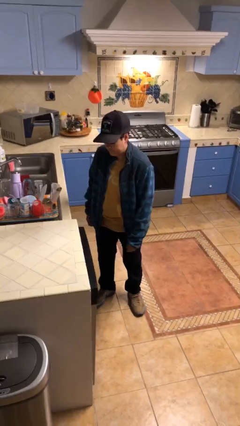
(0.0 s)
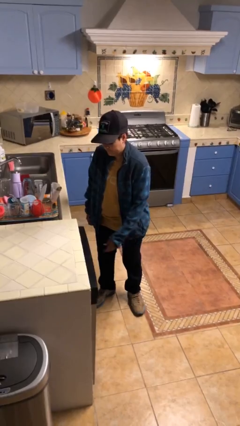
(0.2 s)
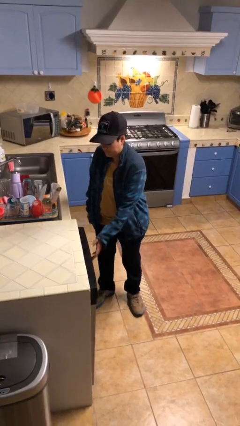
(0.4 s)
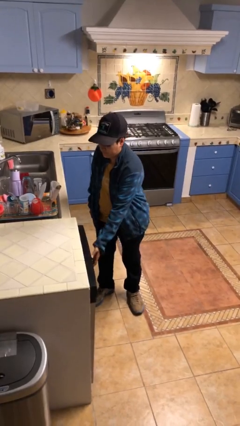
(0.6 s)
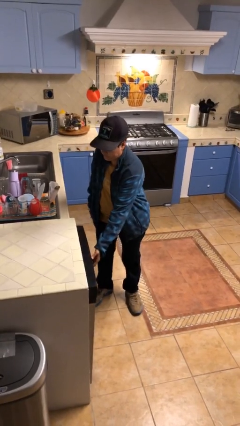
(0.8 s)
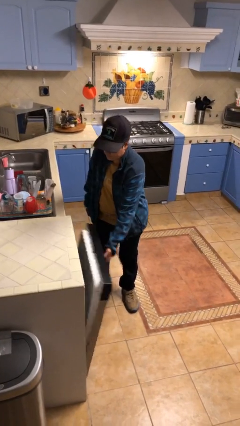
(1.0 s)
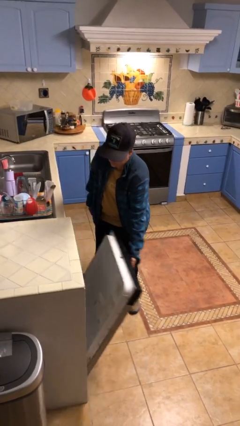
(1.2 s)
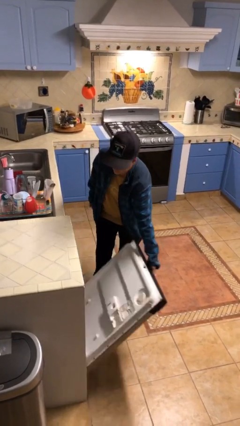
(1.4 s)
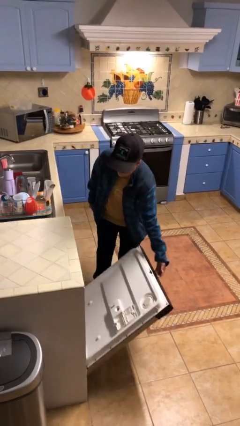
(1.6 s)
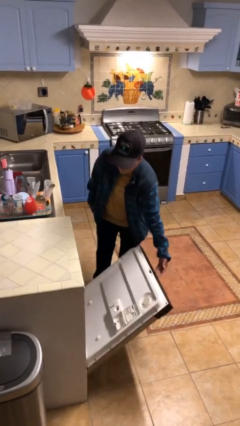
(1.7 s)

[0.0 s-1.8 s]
person opens dishwasher

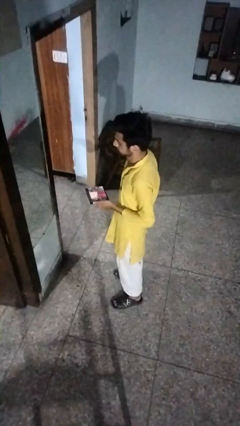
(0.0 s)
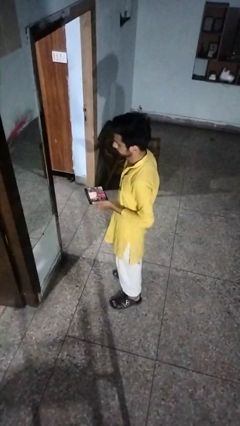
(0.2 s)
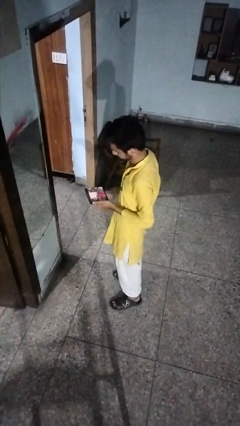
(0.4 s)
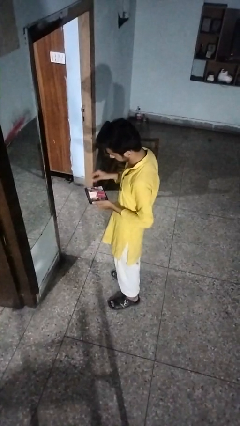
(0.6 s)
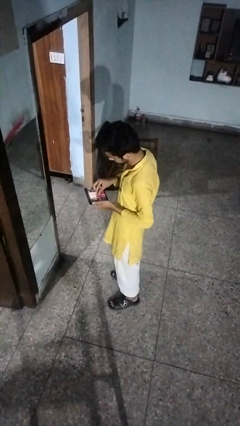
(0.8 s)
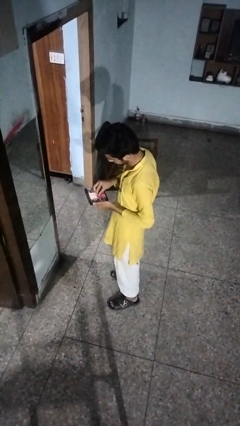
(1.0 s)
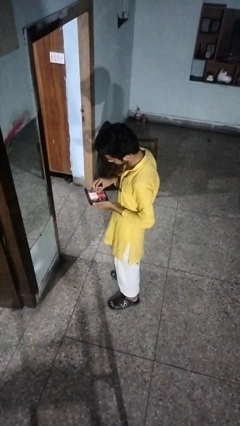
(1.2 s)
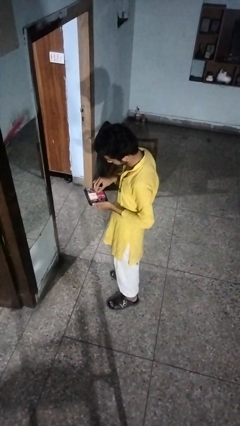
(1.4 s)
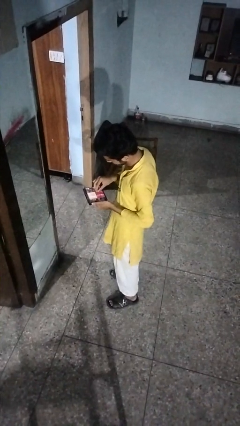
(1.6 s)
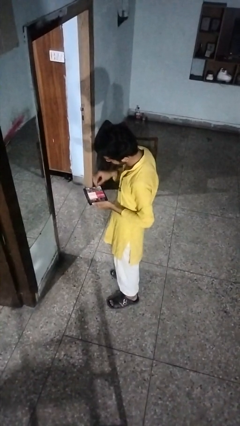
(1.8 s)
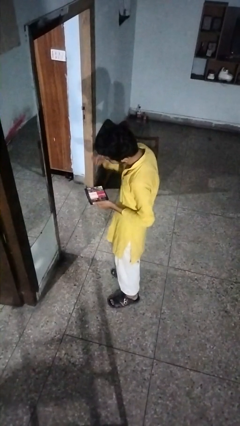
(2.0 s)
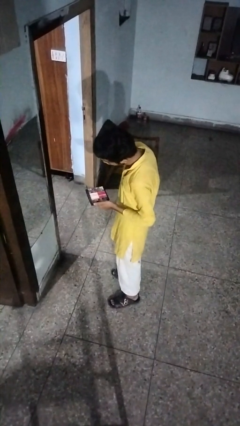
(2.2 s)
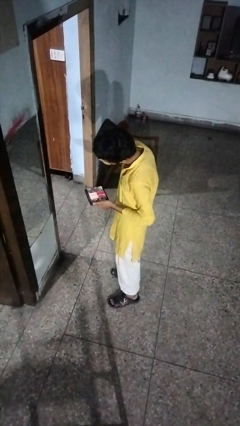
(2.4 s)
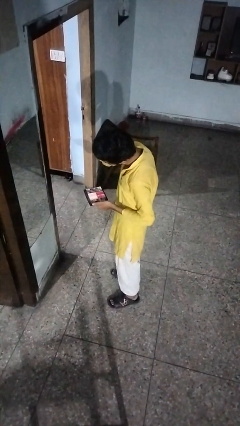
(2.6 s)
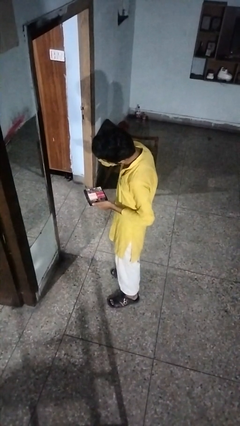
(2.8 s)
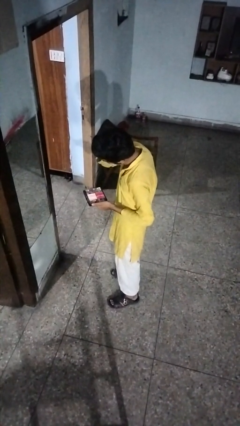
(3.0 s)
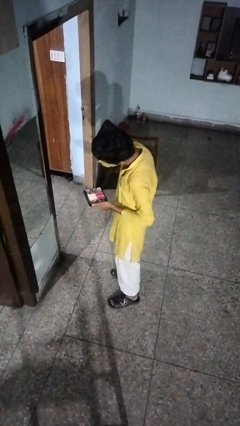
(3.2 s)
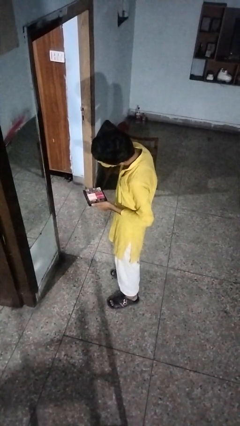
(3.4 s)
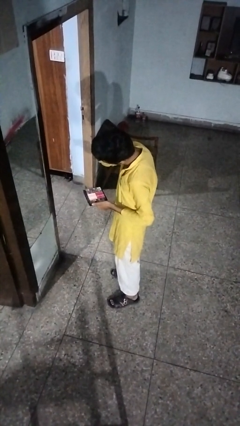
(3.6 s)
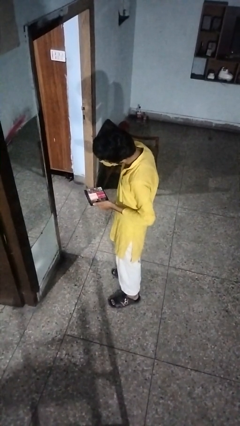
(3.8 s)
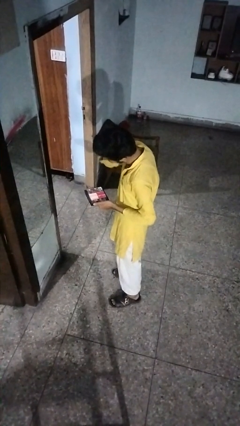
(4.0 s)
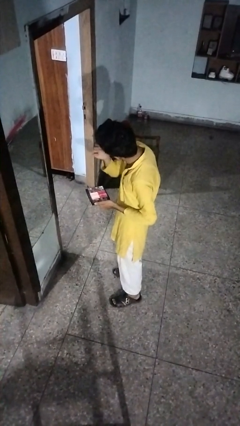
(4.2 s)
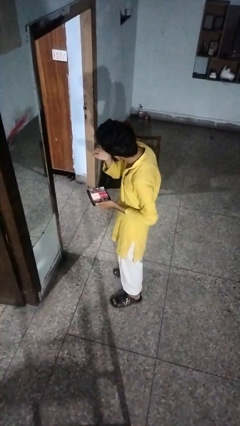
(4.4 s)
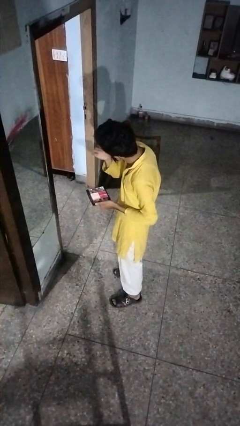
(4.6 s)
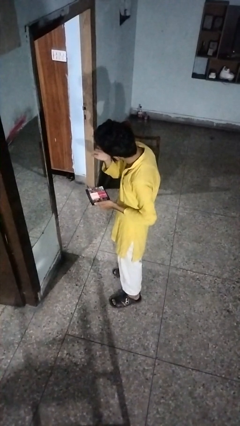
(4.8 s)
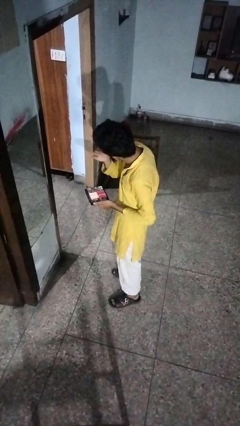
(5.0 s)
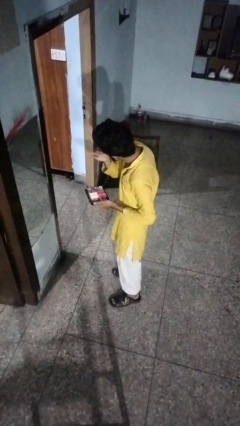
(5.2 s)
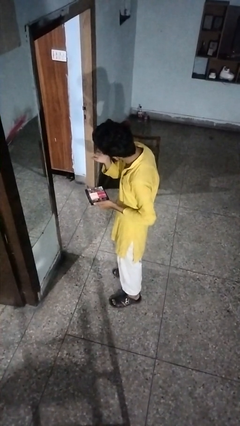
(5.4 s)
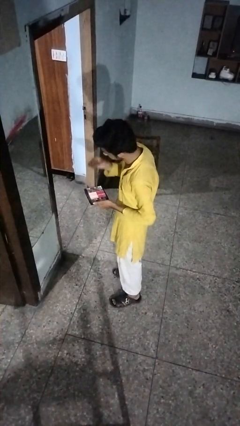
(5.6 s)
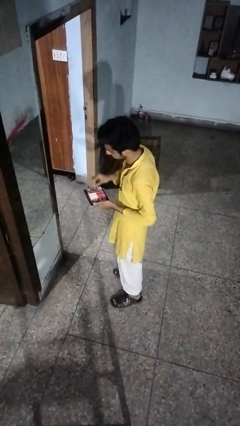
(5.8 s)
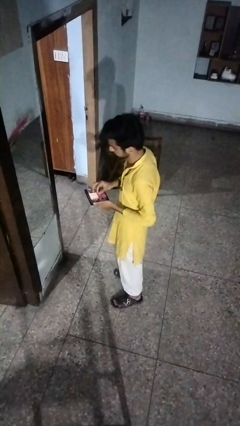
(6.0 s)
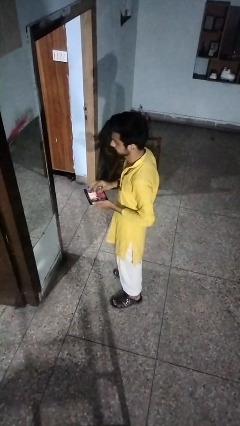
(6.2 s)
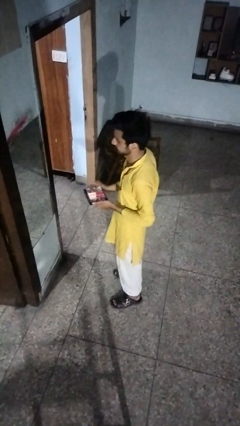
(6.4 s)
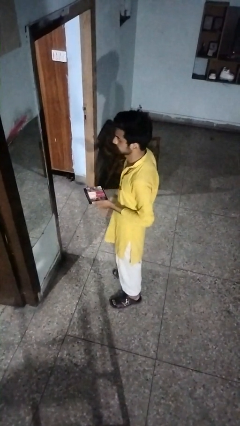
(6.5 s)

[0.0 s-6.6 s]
person applies eye makeup

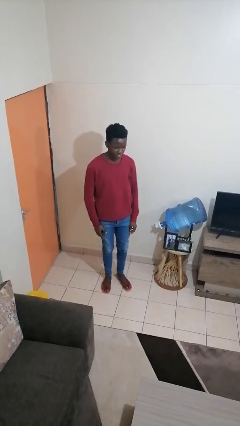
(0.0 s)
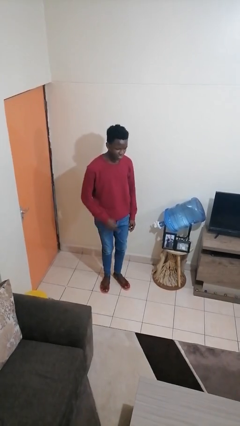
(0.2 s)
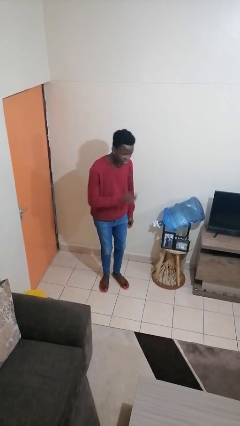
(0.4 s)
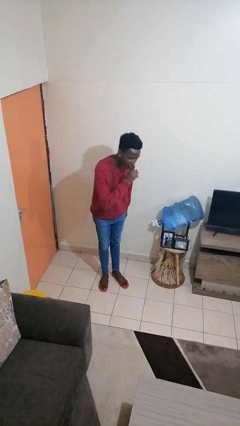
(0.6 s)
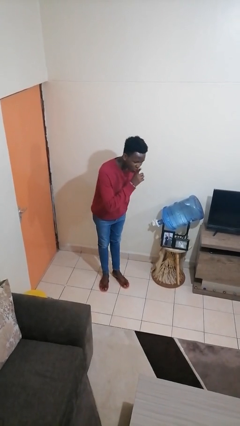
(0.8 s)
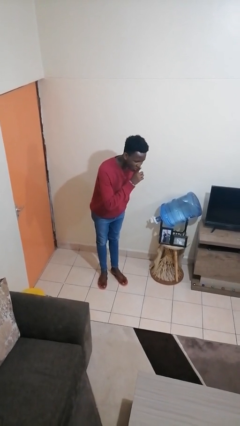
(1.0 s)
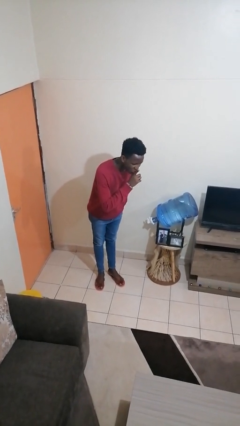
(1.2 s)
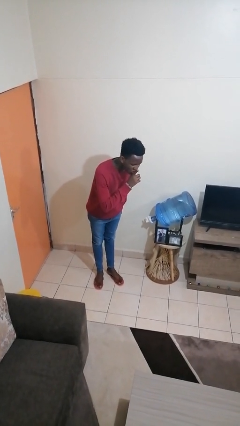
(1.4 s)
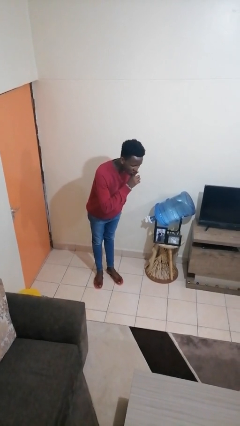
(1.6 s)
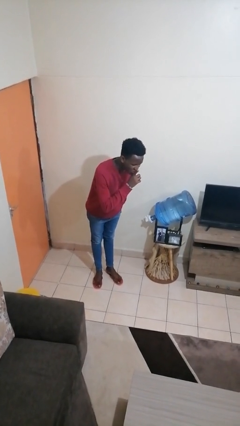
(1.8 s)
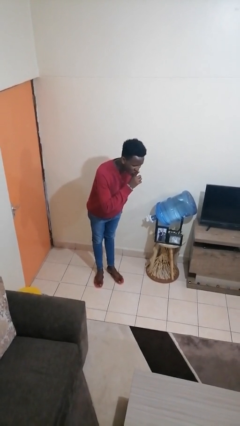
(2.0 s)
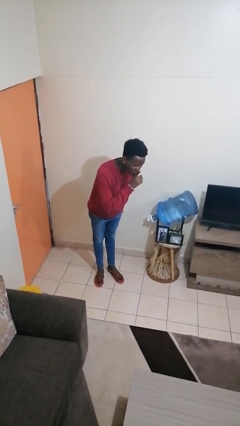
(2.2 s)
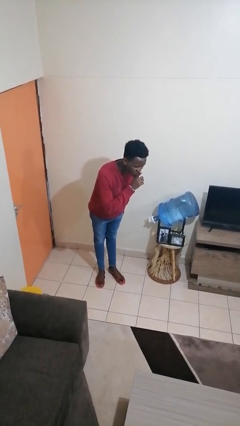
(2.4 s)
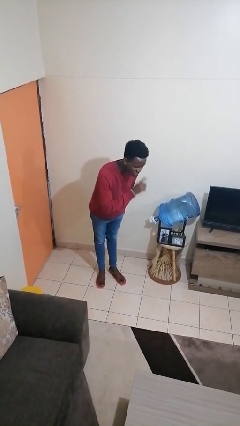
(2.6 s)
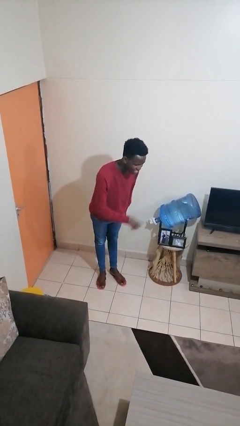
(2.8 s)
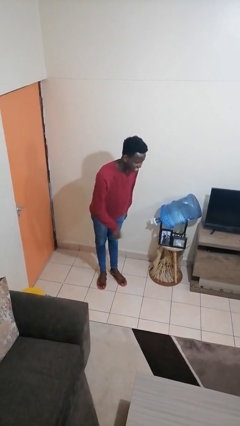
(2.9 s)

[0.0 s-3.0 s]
person gestures be quiet

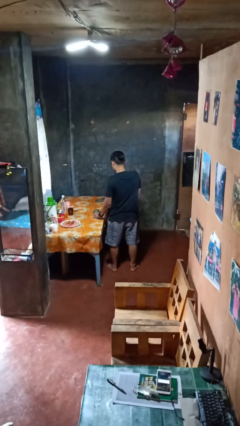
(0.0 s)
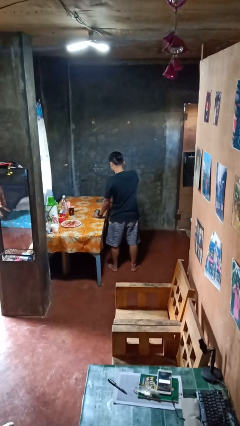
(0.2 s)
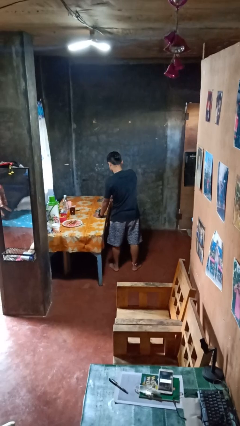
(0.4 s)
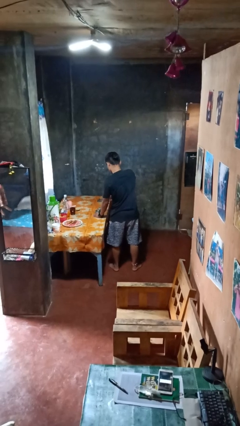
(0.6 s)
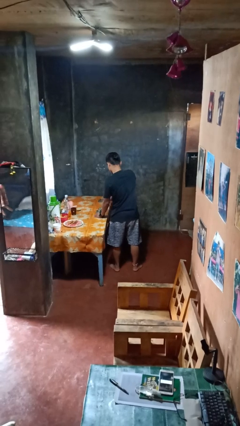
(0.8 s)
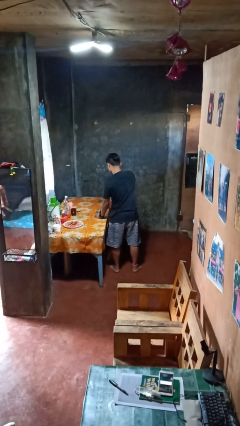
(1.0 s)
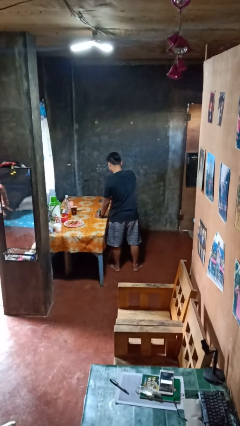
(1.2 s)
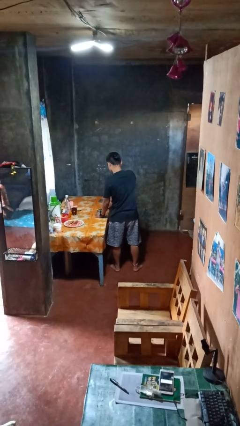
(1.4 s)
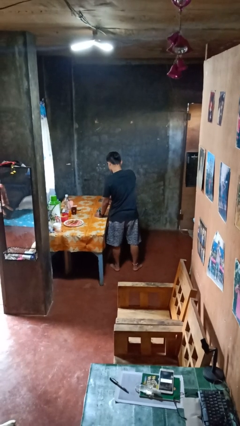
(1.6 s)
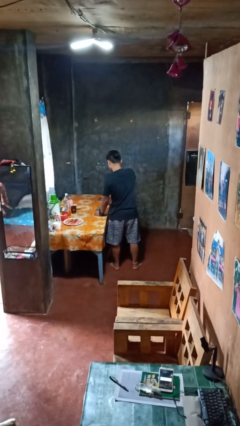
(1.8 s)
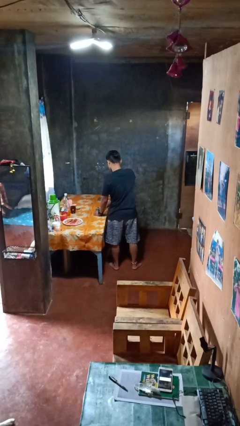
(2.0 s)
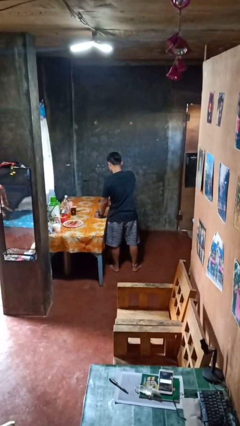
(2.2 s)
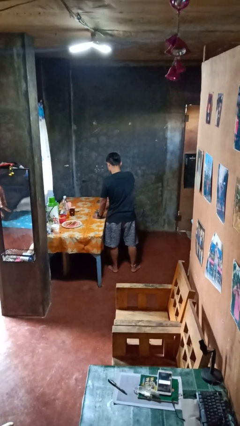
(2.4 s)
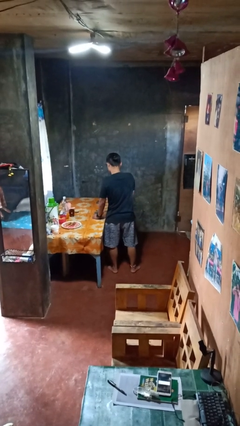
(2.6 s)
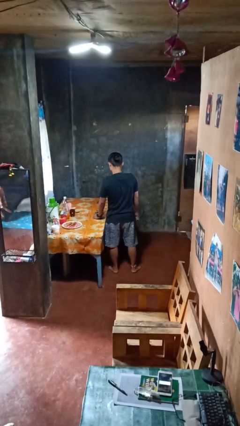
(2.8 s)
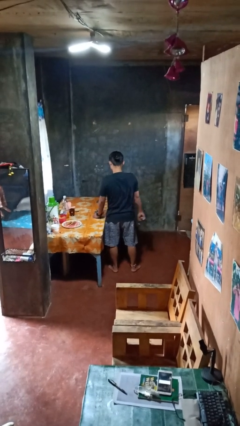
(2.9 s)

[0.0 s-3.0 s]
person opens can with can opener

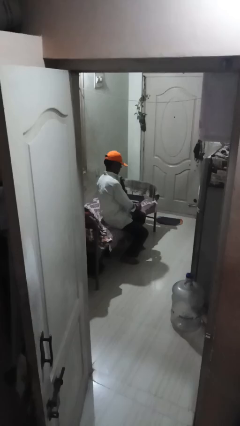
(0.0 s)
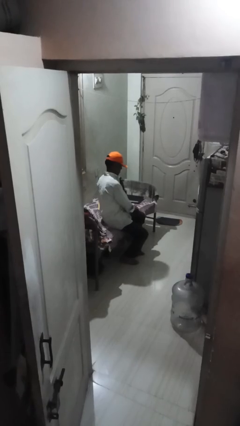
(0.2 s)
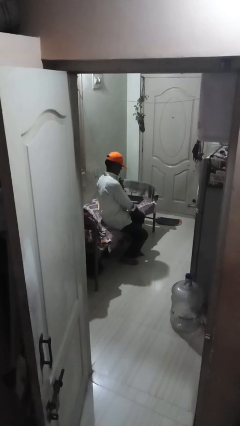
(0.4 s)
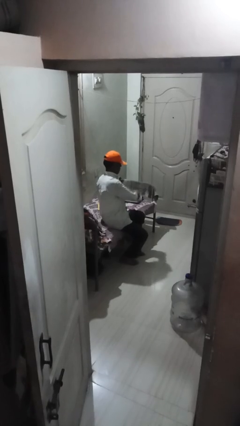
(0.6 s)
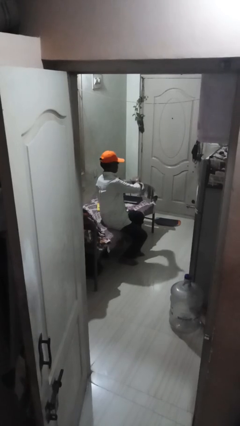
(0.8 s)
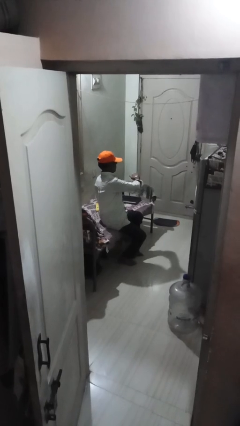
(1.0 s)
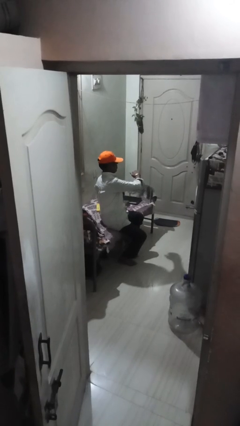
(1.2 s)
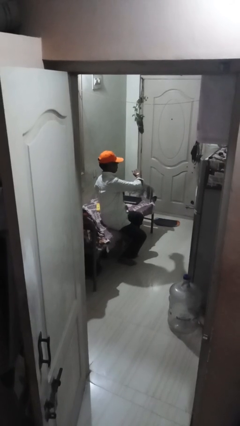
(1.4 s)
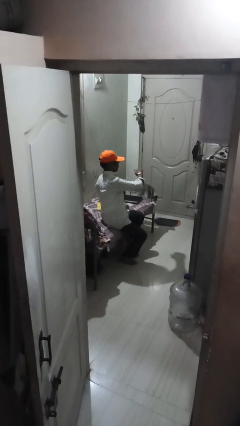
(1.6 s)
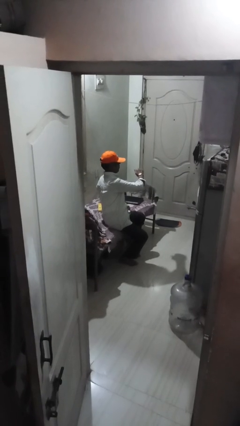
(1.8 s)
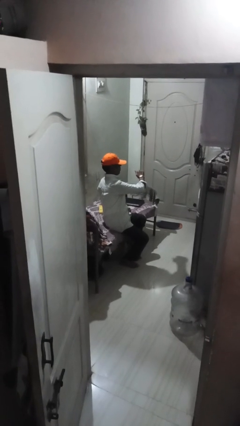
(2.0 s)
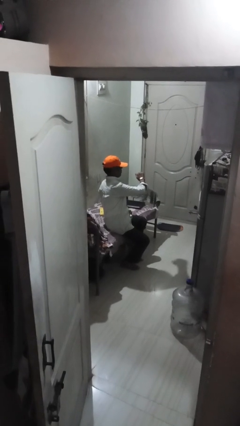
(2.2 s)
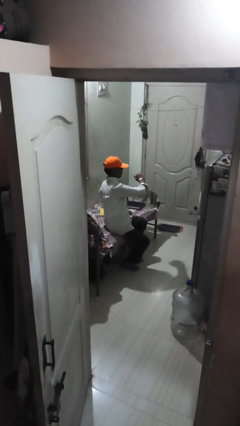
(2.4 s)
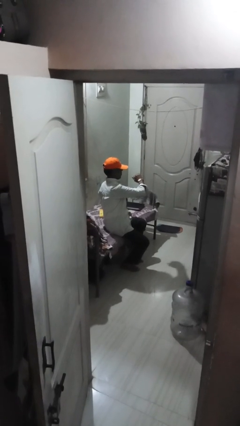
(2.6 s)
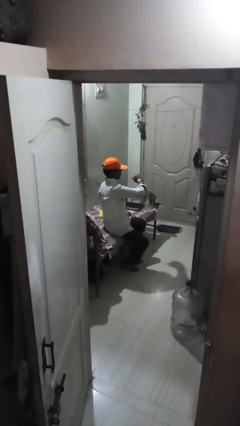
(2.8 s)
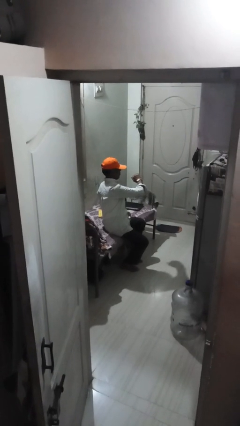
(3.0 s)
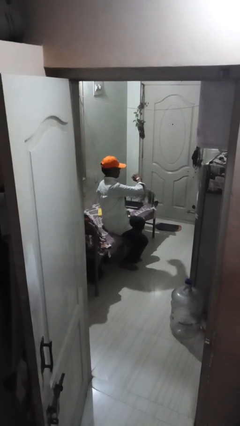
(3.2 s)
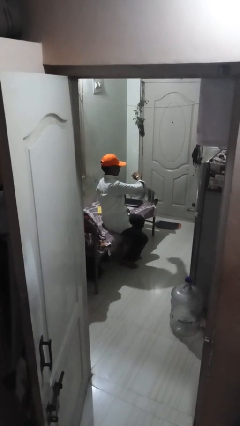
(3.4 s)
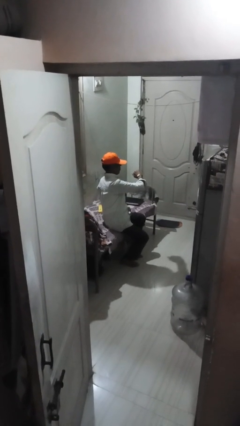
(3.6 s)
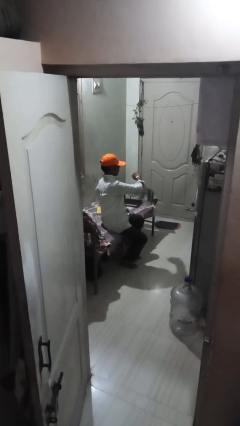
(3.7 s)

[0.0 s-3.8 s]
person looks at wristwatch
